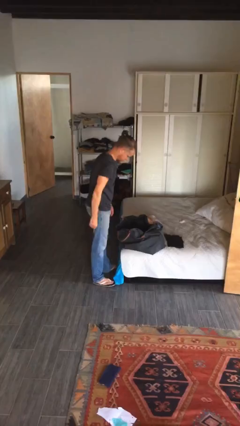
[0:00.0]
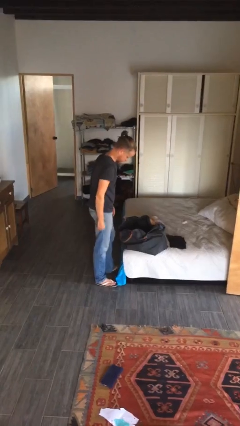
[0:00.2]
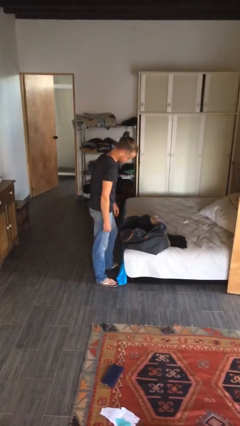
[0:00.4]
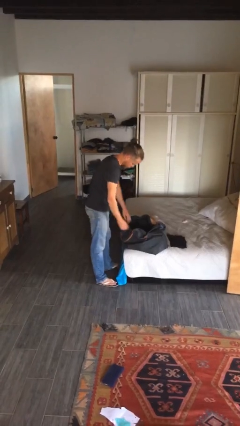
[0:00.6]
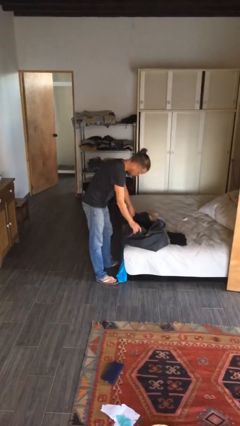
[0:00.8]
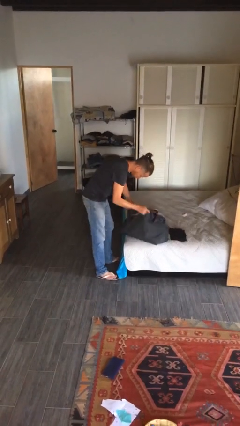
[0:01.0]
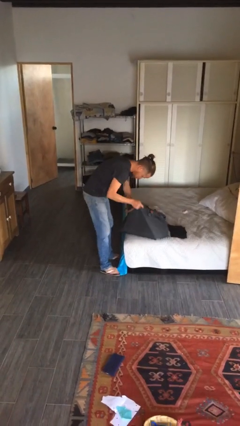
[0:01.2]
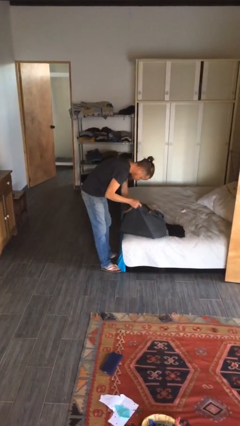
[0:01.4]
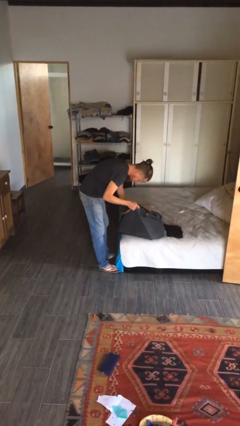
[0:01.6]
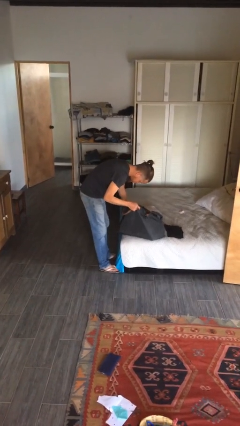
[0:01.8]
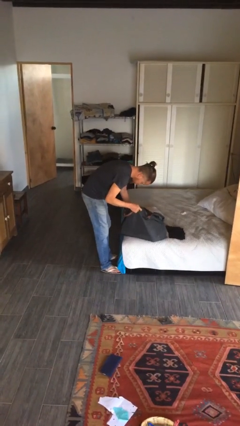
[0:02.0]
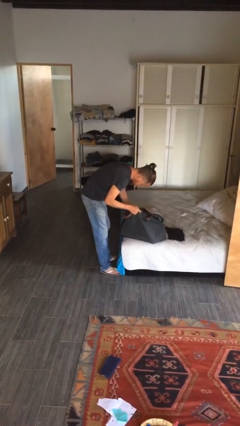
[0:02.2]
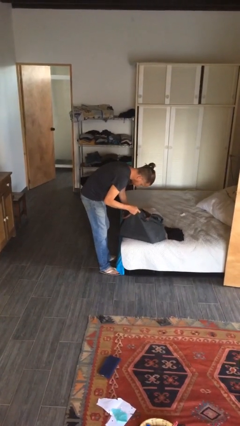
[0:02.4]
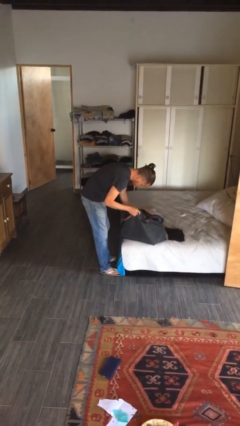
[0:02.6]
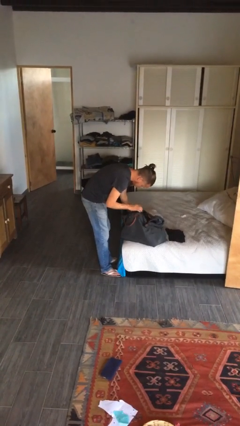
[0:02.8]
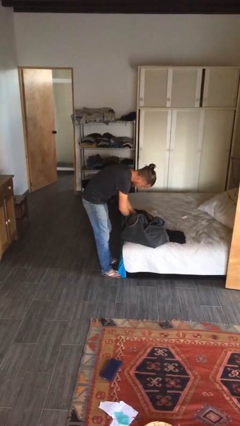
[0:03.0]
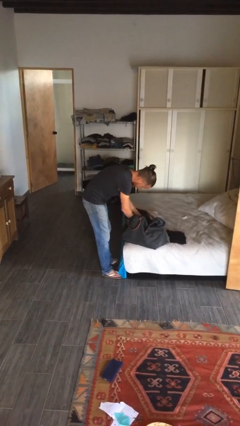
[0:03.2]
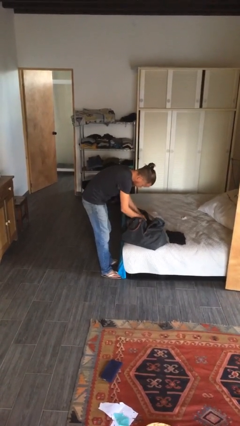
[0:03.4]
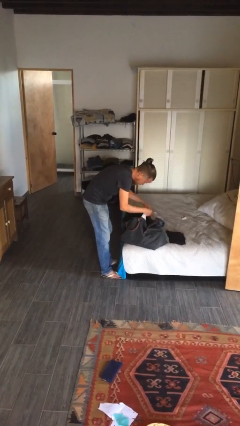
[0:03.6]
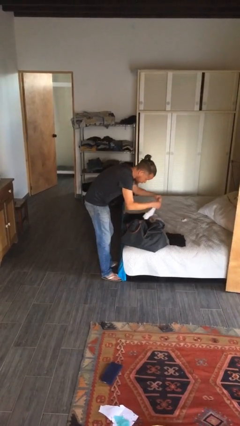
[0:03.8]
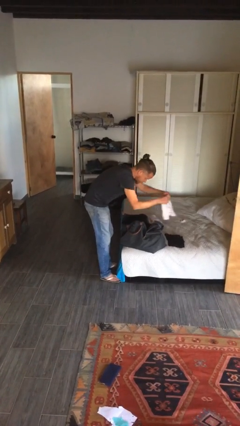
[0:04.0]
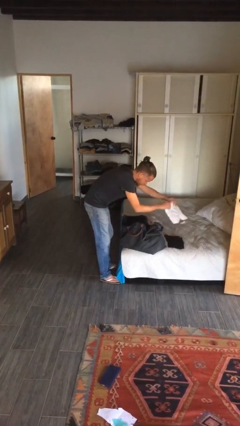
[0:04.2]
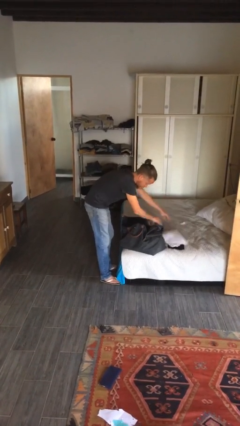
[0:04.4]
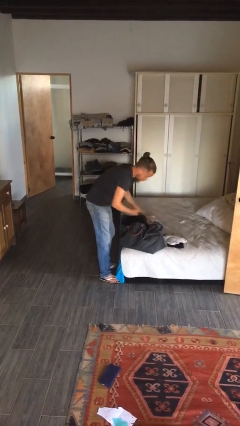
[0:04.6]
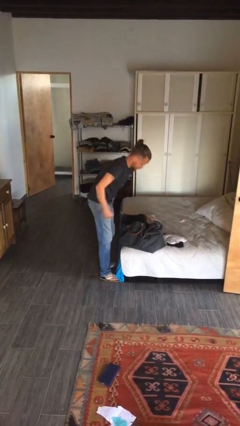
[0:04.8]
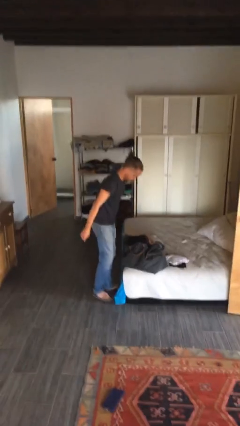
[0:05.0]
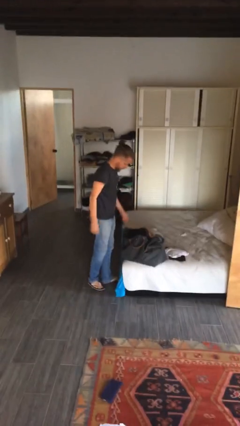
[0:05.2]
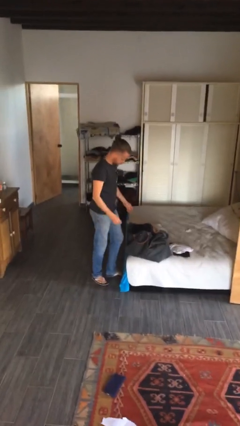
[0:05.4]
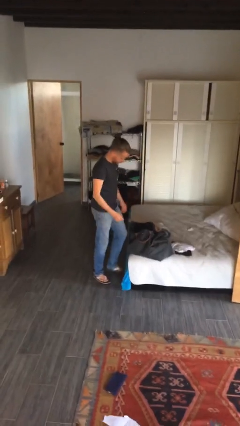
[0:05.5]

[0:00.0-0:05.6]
person unloads clothes from suitcase

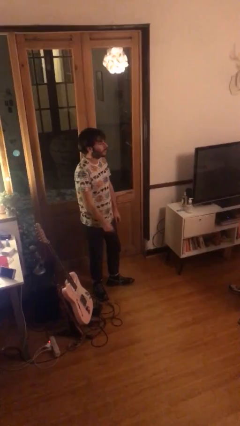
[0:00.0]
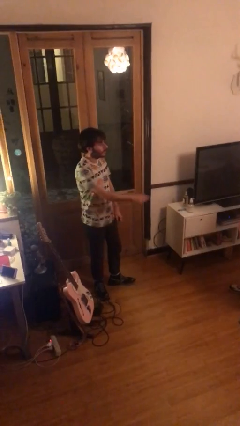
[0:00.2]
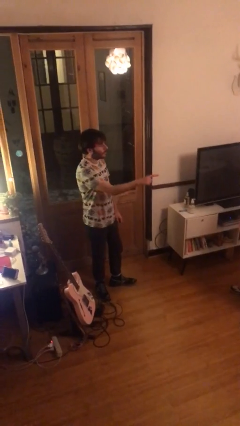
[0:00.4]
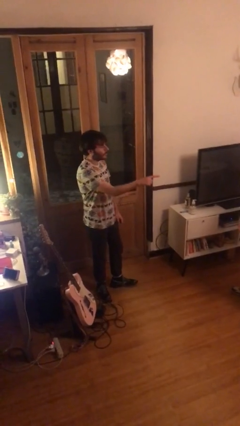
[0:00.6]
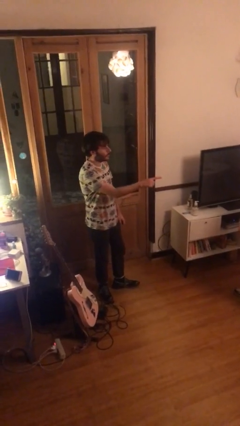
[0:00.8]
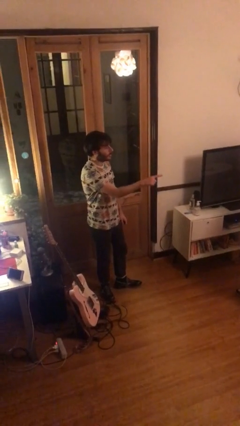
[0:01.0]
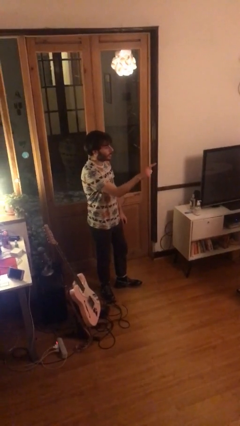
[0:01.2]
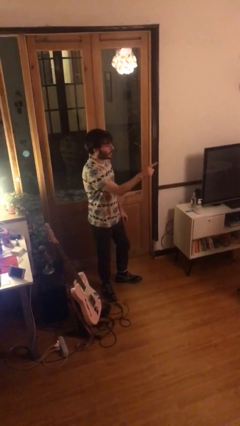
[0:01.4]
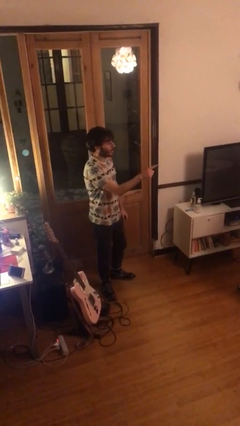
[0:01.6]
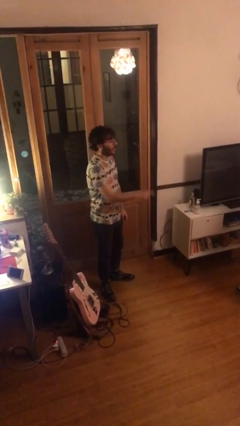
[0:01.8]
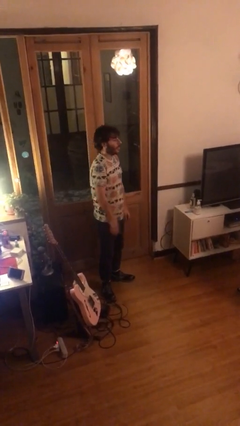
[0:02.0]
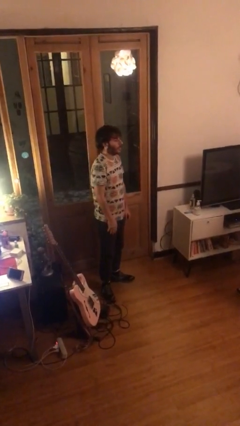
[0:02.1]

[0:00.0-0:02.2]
person points at person

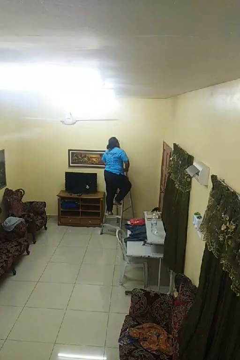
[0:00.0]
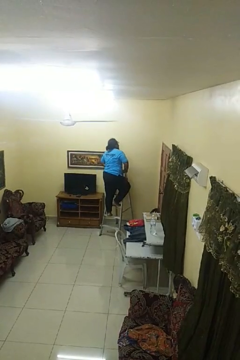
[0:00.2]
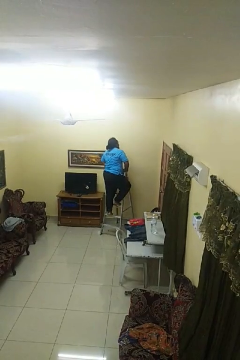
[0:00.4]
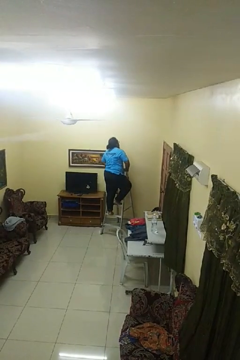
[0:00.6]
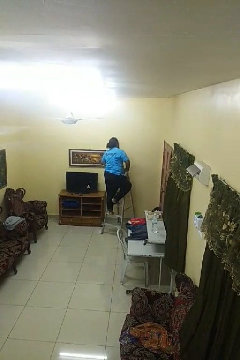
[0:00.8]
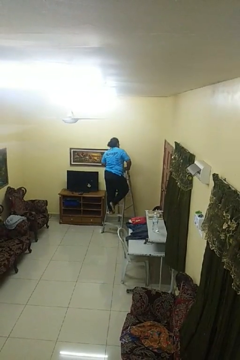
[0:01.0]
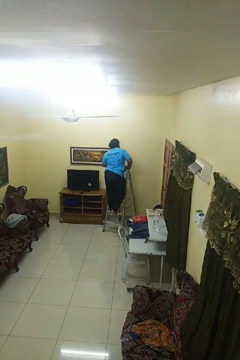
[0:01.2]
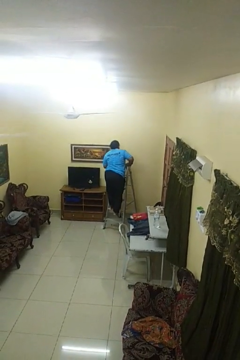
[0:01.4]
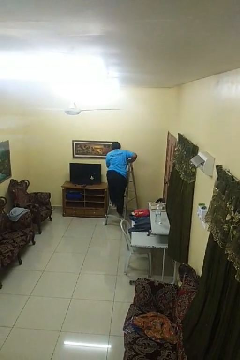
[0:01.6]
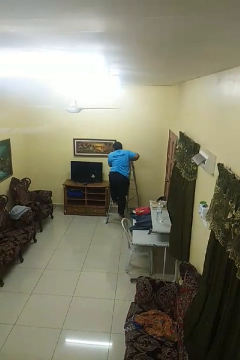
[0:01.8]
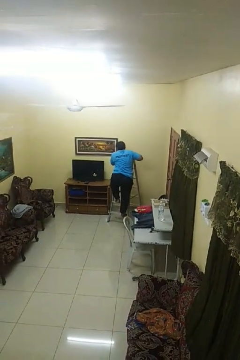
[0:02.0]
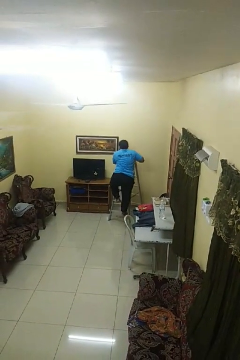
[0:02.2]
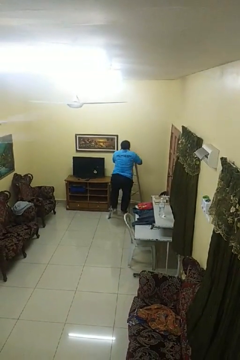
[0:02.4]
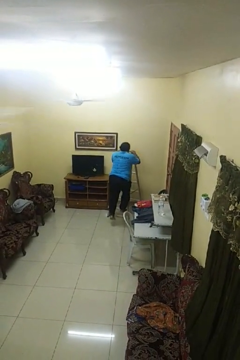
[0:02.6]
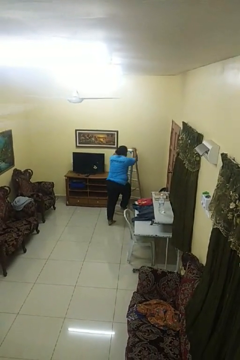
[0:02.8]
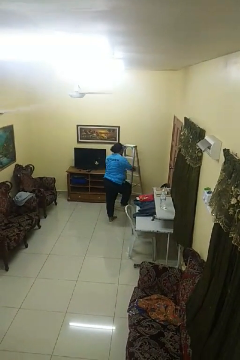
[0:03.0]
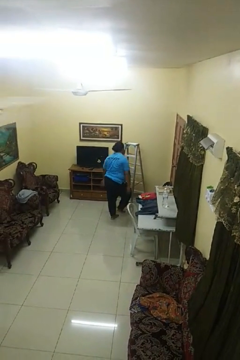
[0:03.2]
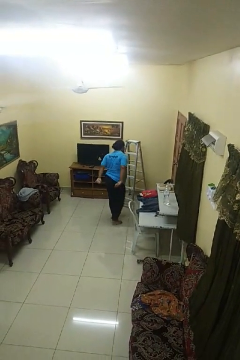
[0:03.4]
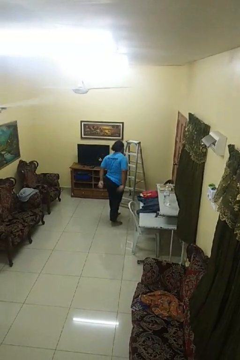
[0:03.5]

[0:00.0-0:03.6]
person climbs down ladder

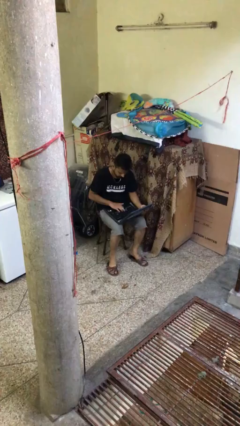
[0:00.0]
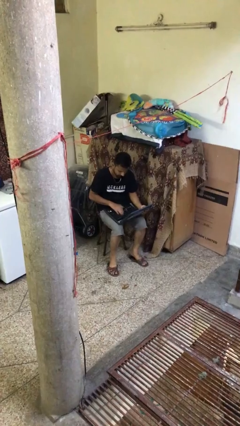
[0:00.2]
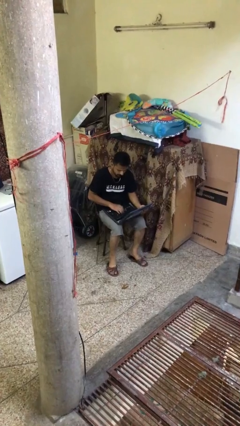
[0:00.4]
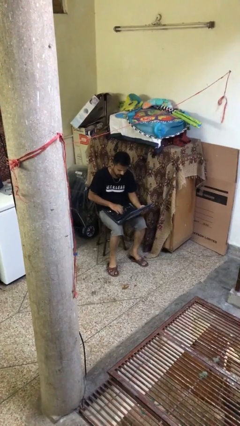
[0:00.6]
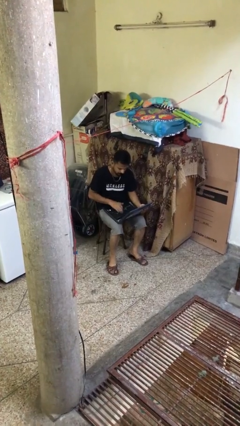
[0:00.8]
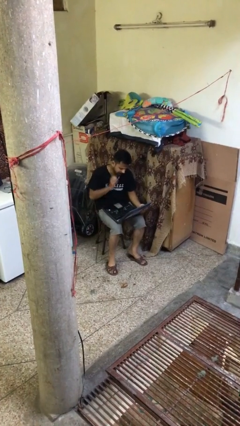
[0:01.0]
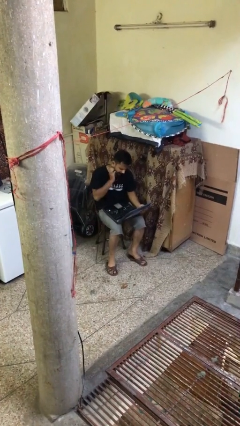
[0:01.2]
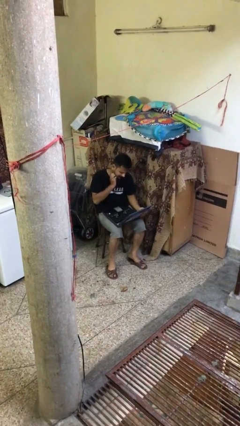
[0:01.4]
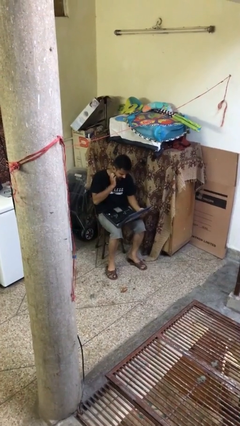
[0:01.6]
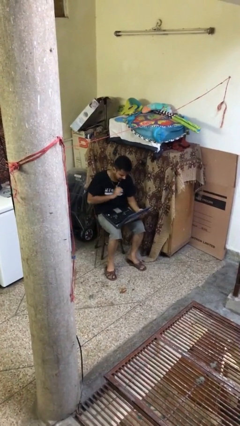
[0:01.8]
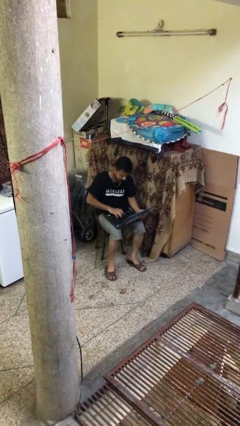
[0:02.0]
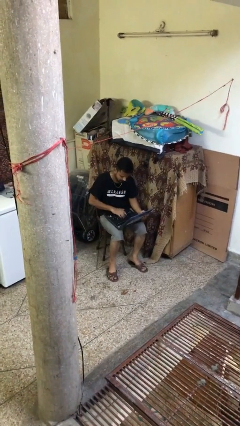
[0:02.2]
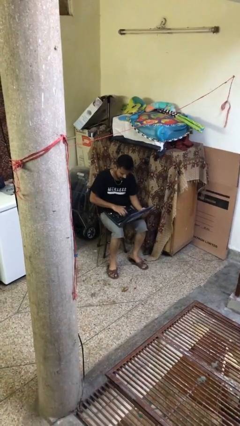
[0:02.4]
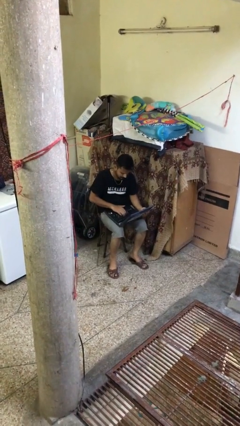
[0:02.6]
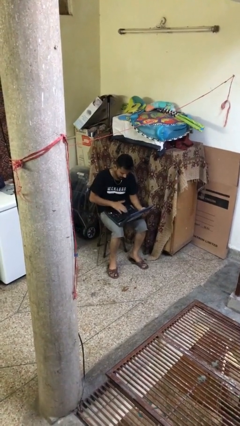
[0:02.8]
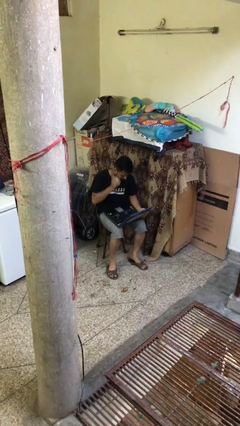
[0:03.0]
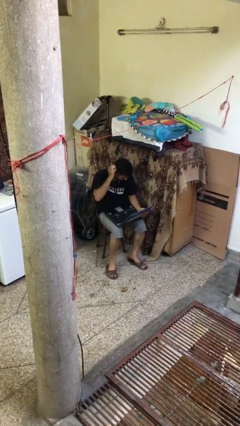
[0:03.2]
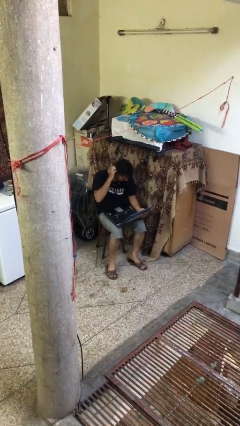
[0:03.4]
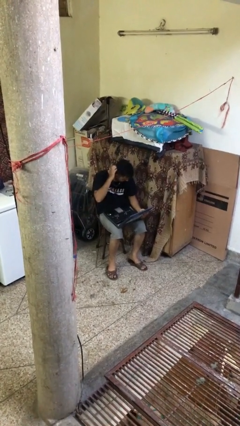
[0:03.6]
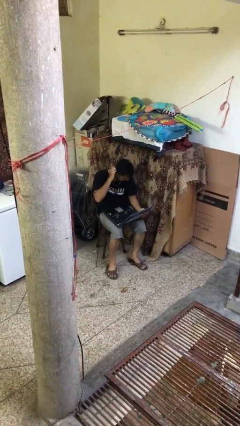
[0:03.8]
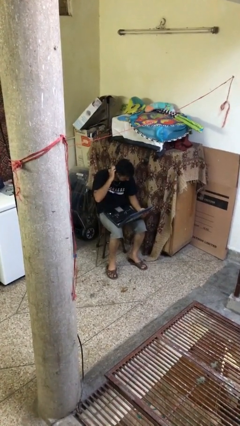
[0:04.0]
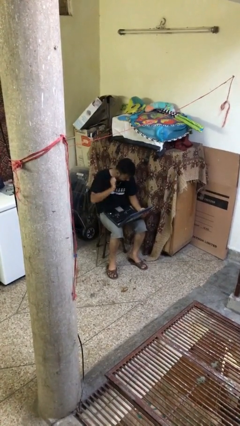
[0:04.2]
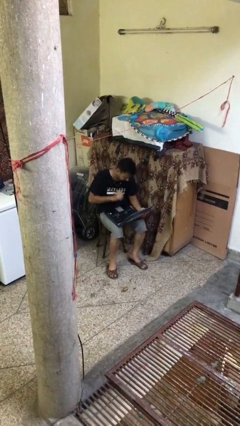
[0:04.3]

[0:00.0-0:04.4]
person interacts with laptop

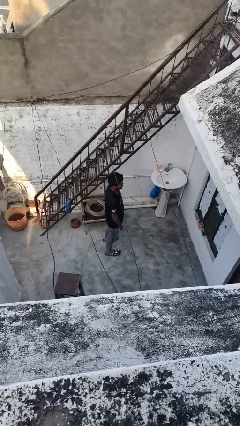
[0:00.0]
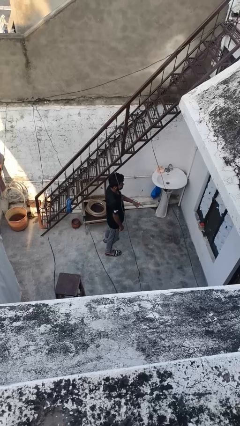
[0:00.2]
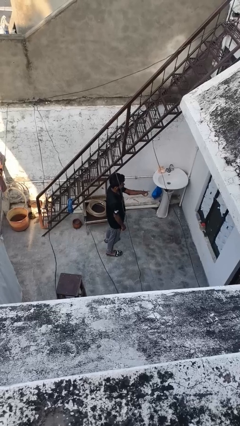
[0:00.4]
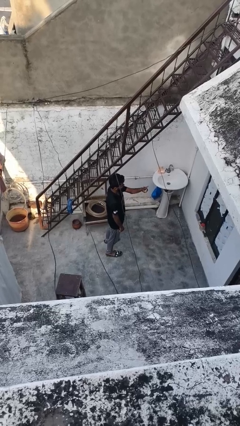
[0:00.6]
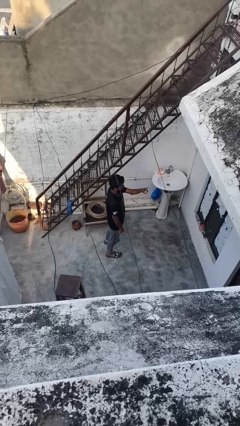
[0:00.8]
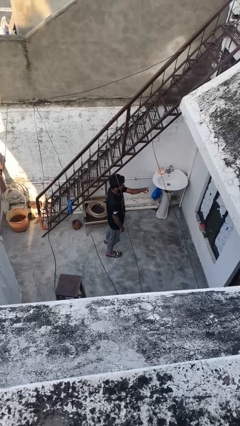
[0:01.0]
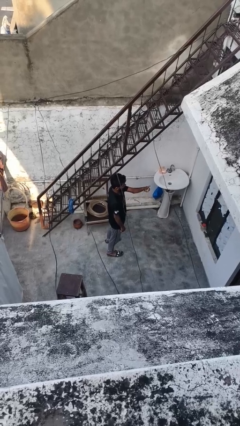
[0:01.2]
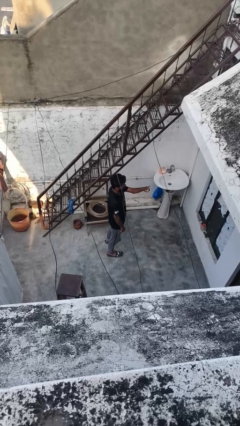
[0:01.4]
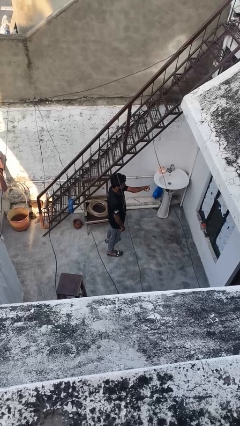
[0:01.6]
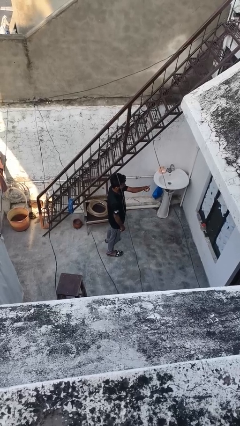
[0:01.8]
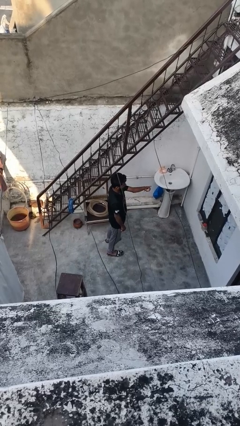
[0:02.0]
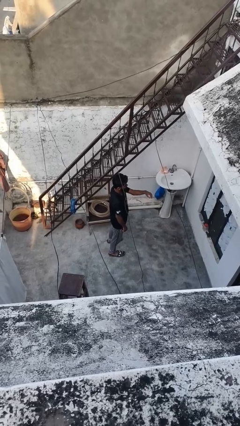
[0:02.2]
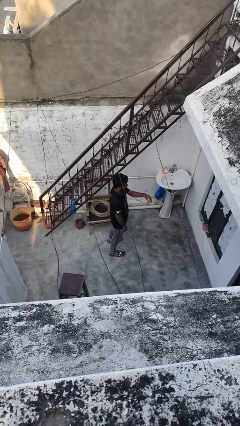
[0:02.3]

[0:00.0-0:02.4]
person gestures peace
